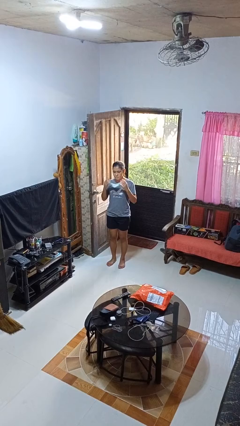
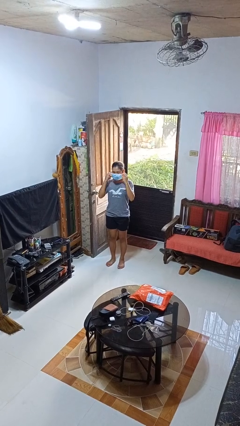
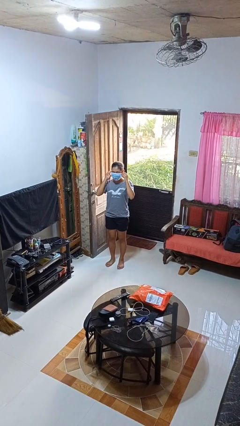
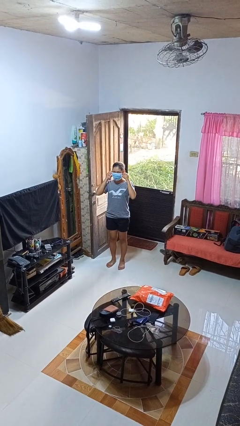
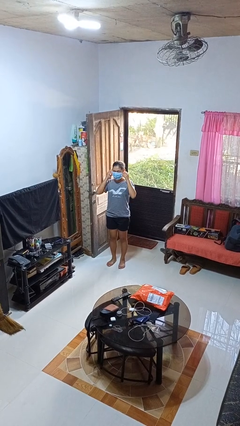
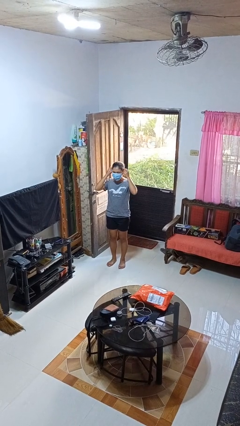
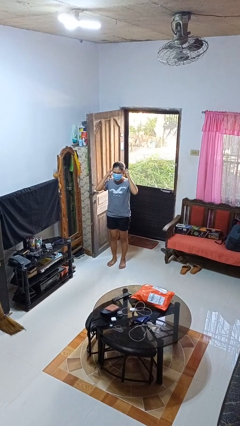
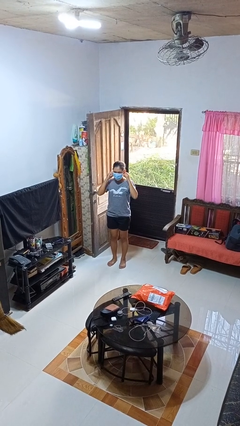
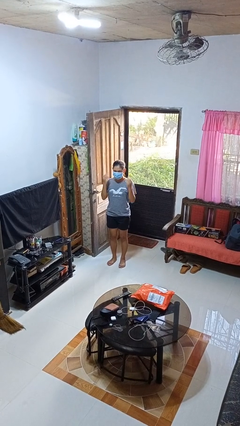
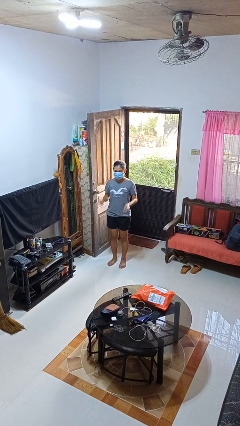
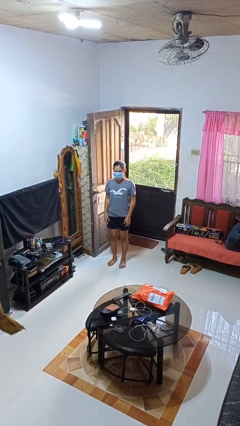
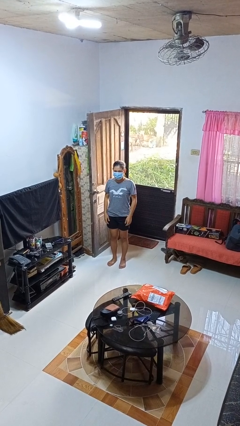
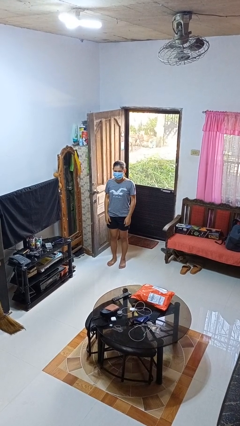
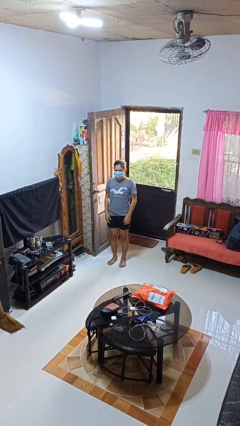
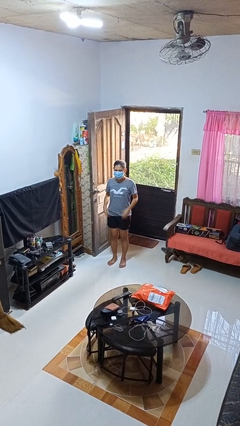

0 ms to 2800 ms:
person puts on facemask

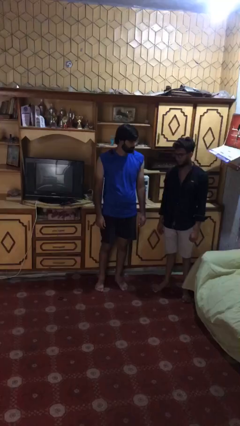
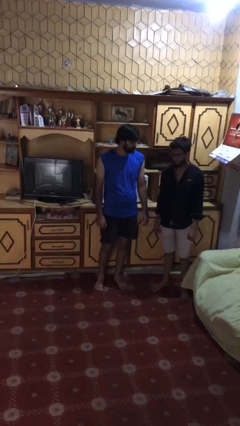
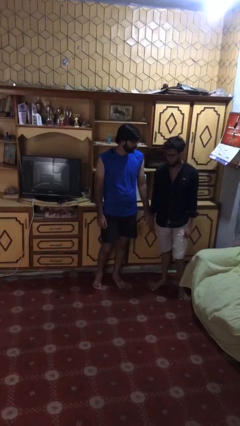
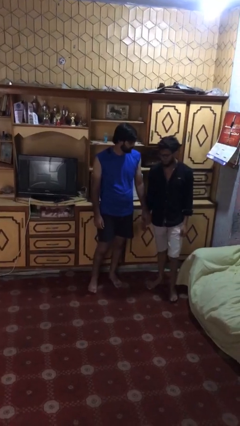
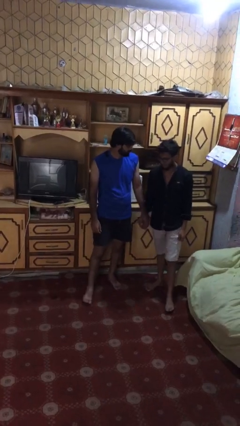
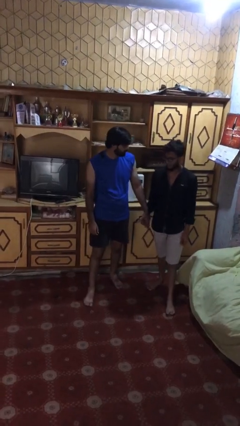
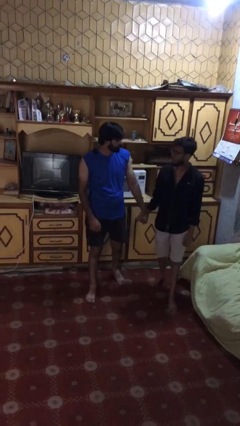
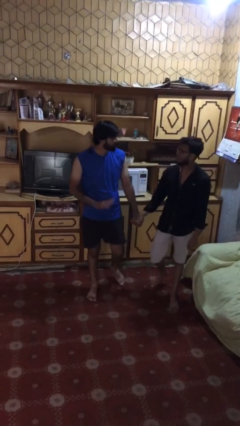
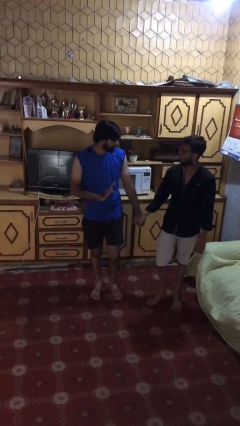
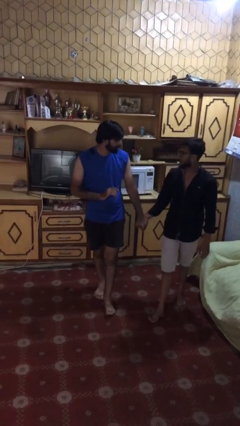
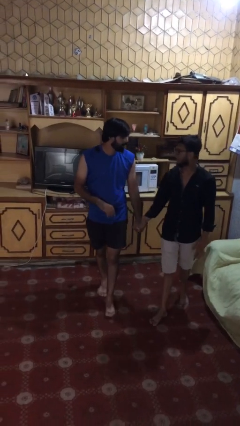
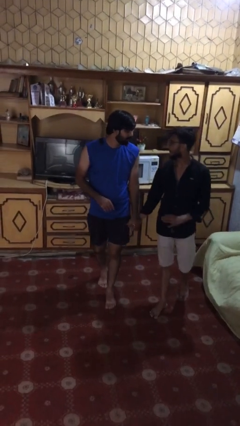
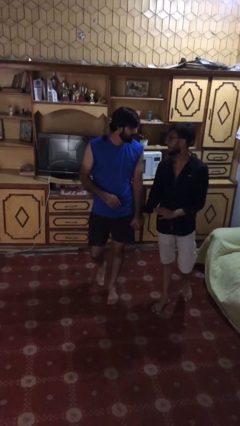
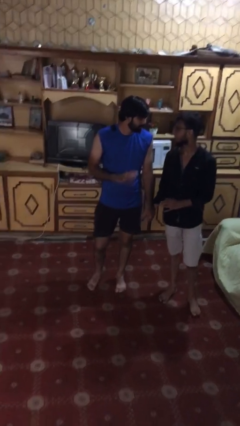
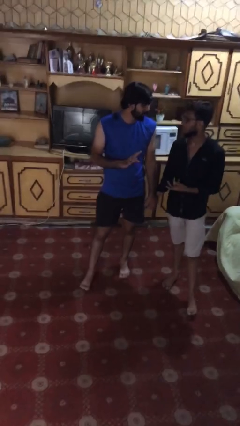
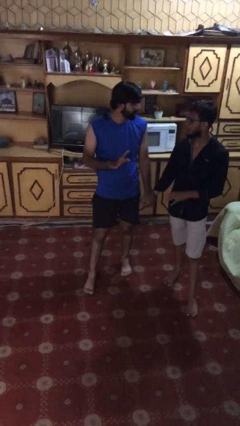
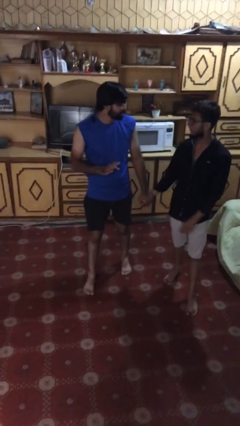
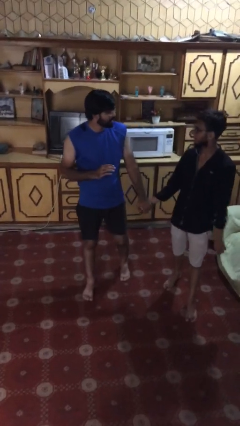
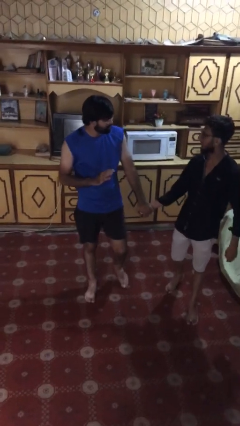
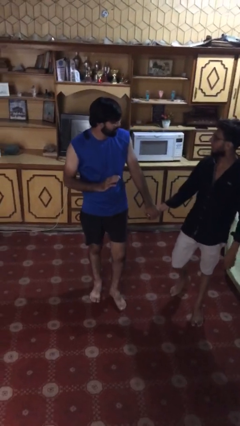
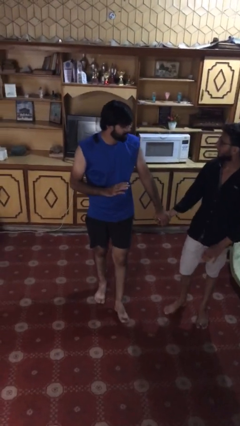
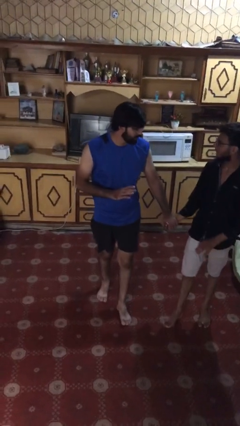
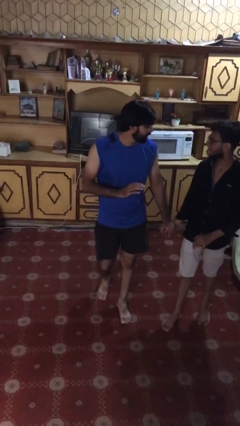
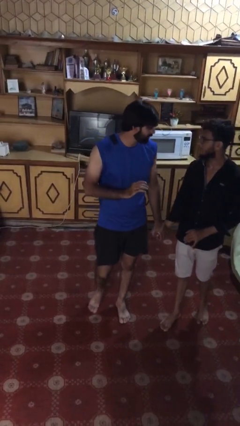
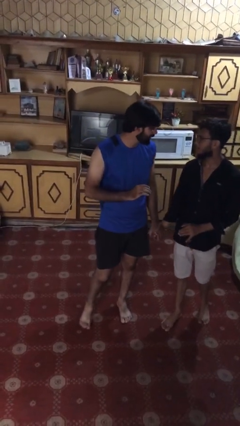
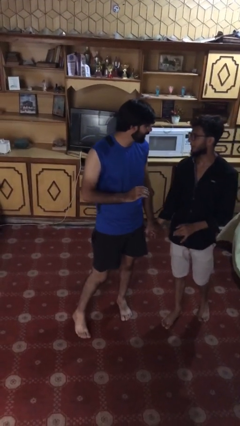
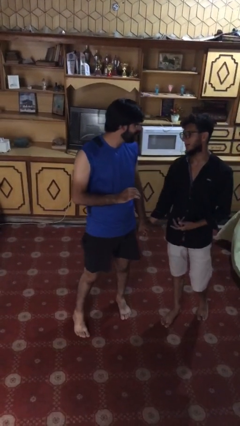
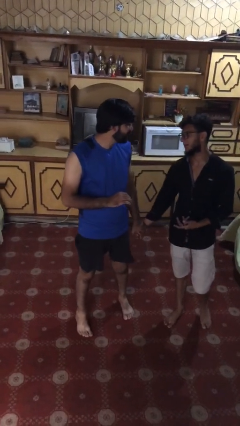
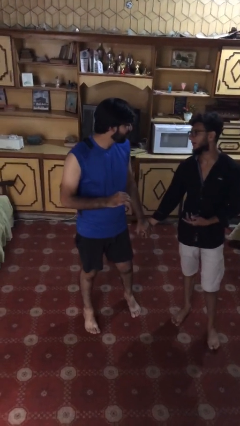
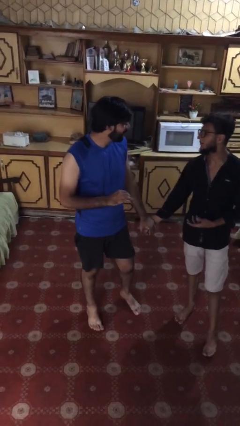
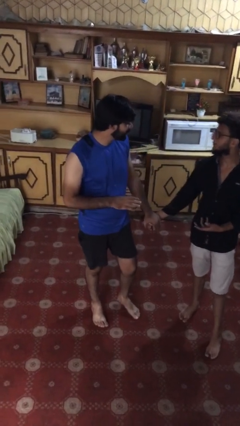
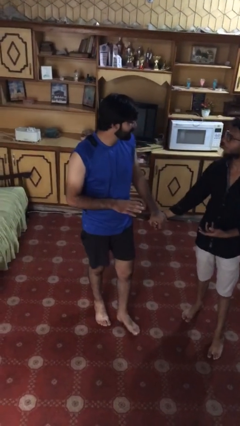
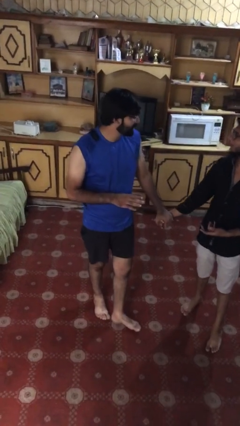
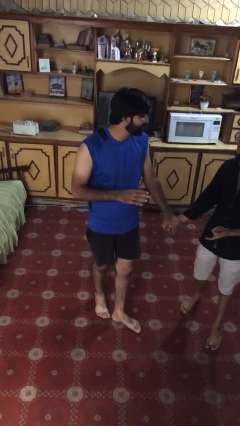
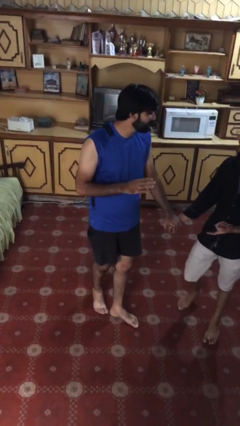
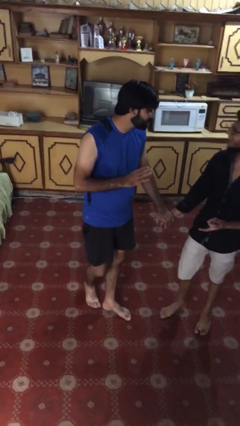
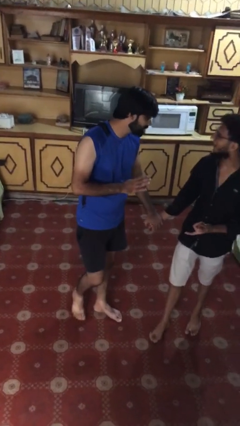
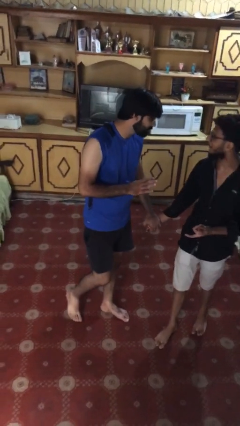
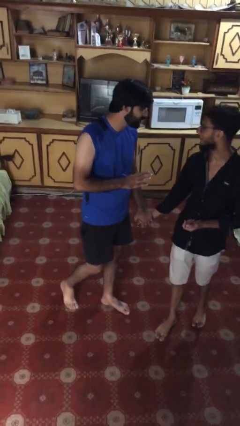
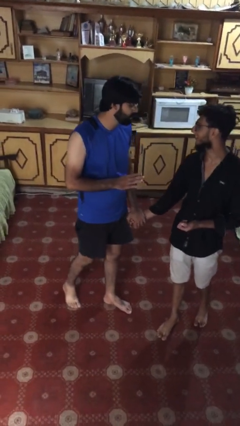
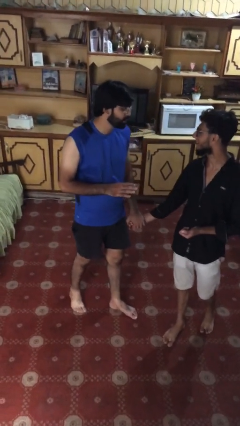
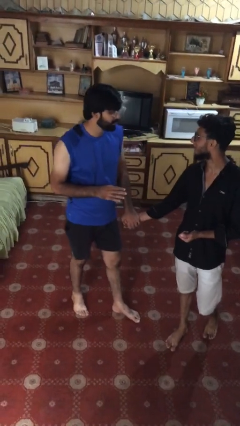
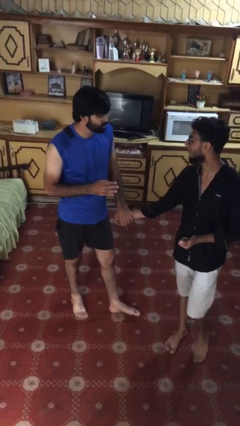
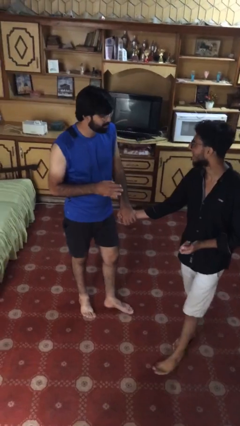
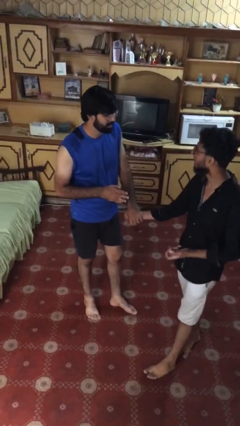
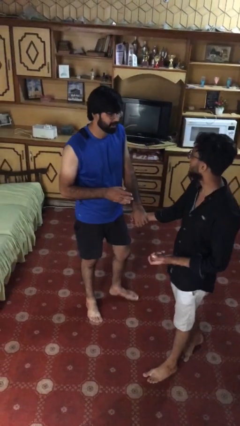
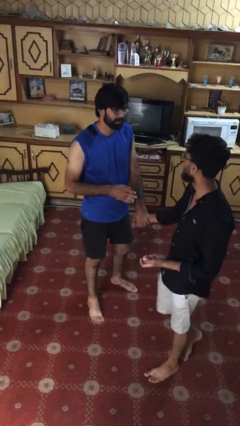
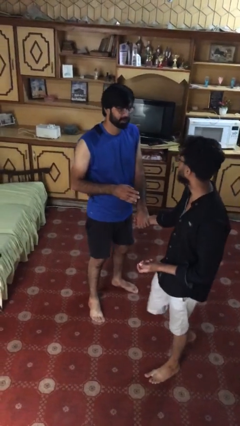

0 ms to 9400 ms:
person holds hand

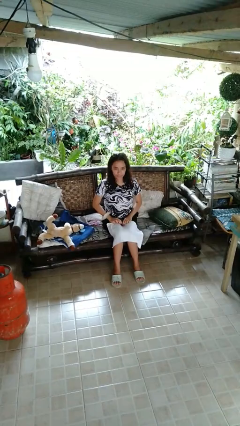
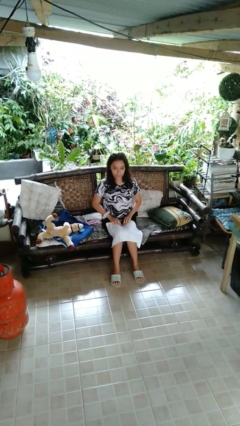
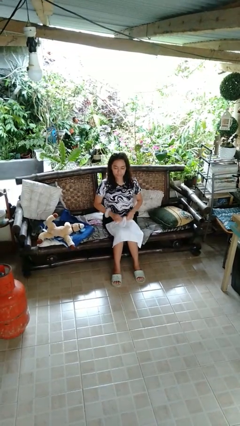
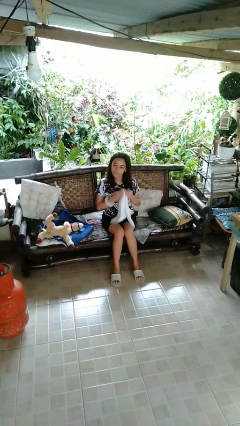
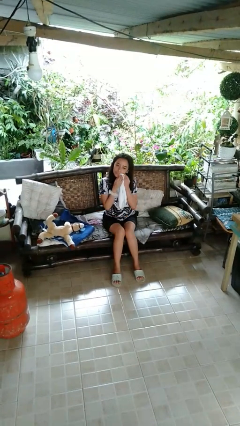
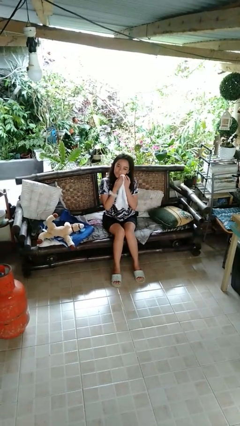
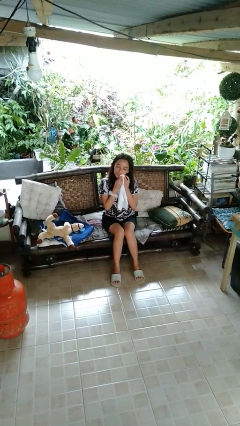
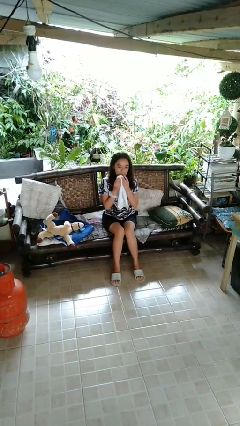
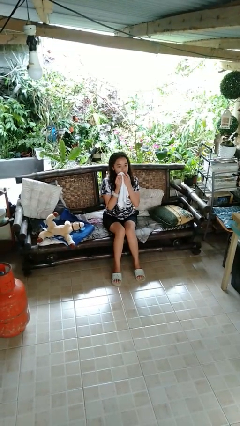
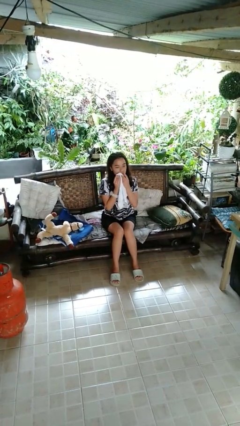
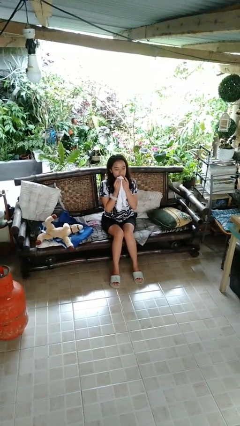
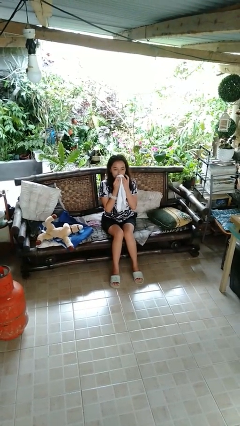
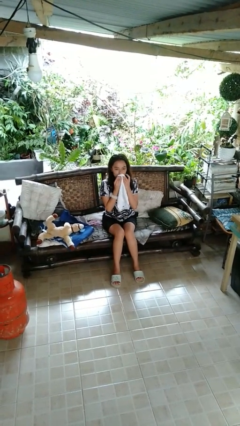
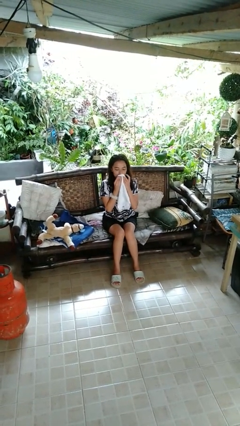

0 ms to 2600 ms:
person wipes mouth with napkin

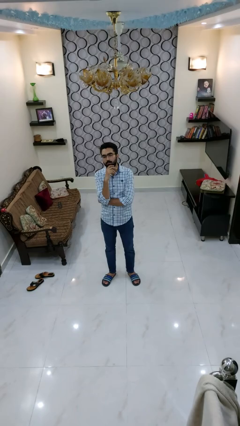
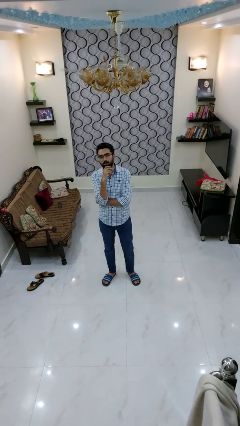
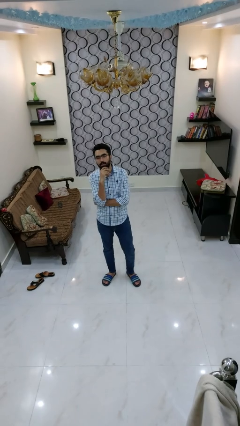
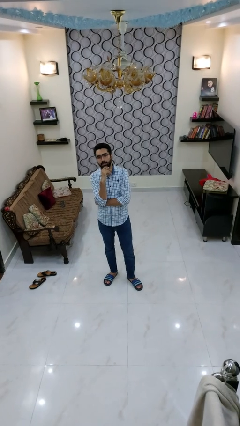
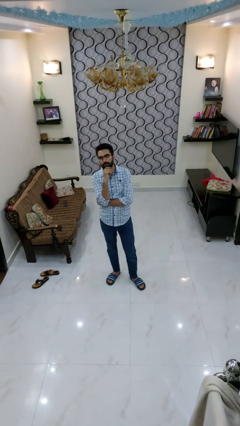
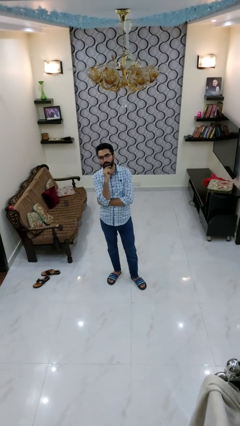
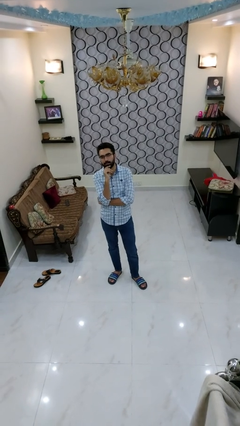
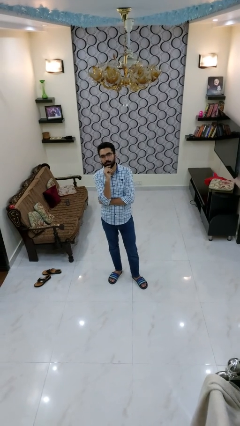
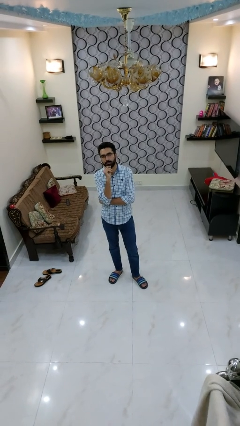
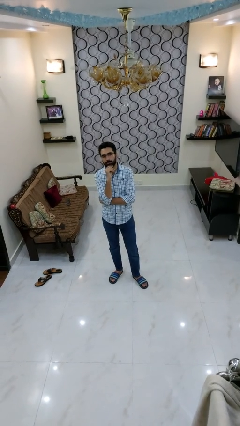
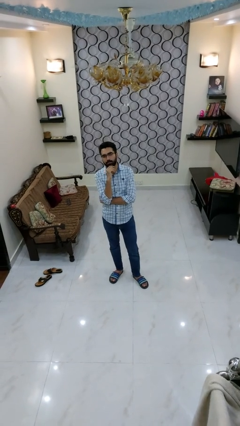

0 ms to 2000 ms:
person strokes chin

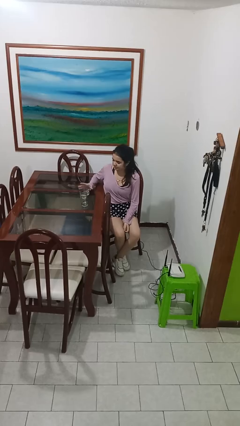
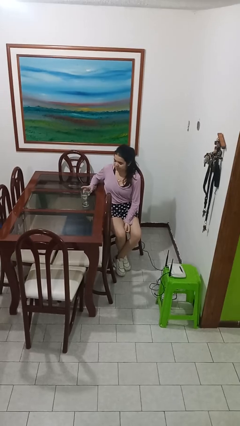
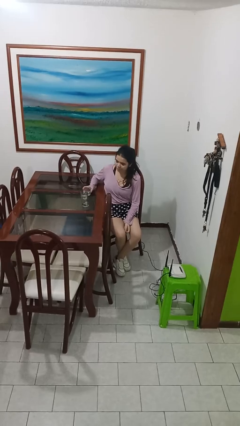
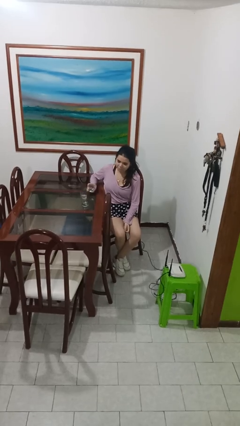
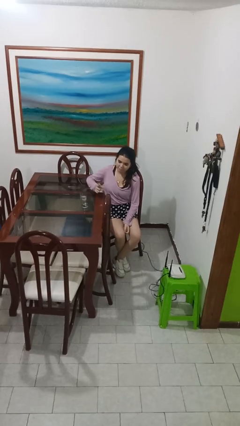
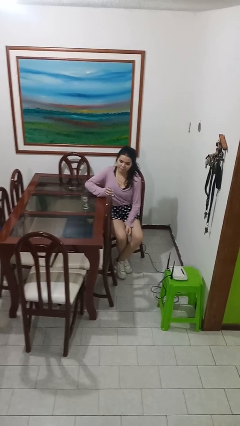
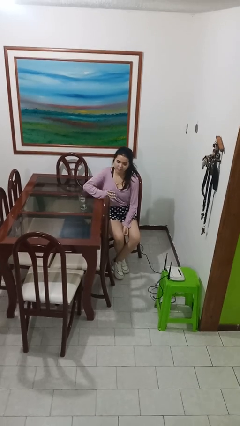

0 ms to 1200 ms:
person picks up object from table
